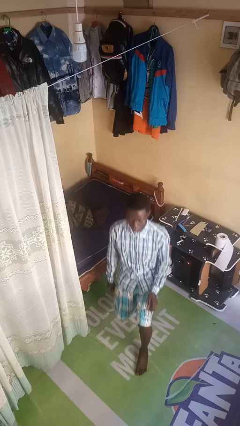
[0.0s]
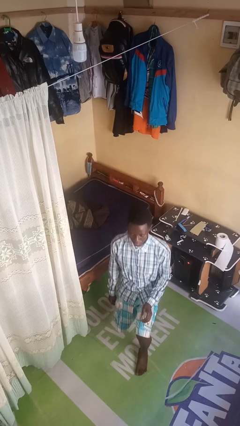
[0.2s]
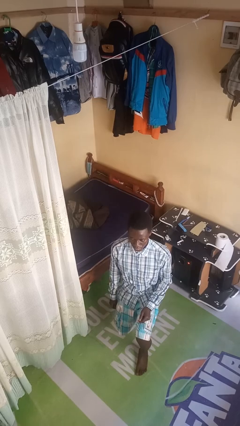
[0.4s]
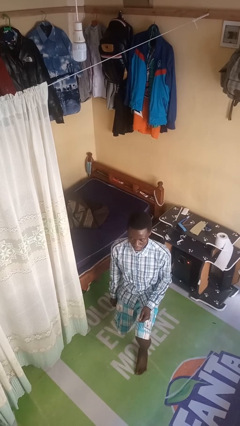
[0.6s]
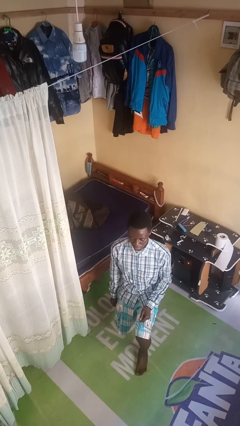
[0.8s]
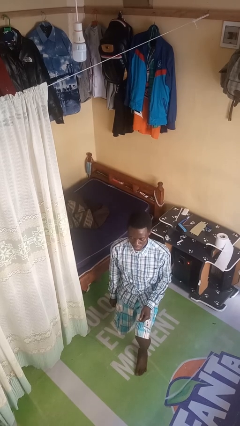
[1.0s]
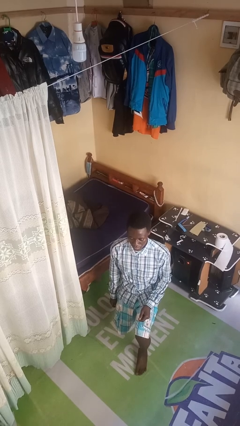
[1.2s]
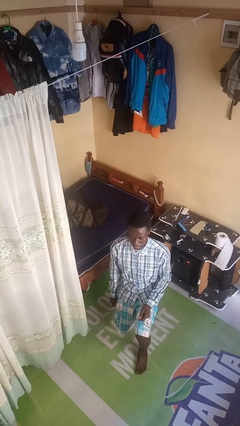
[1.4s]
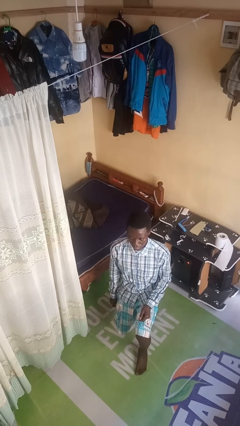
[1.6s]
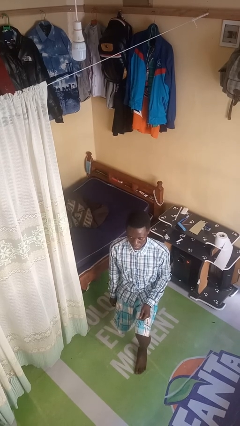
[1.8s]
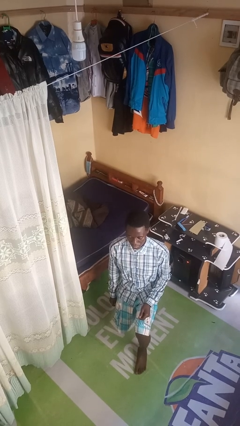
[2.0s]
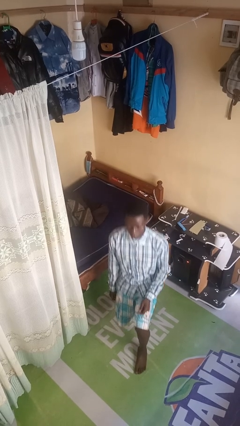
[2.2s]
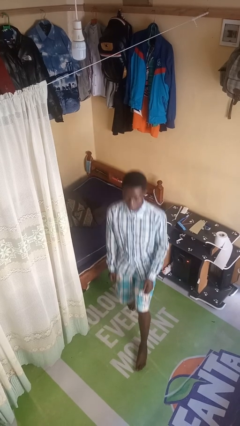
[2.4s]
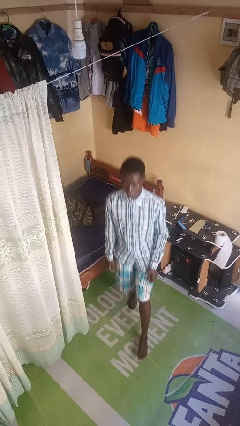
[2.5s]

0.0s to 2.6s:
person exercises with lunges

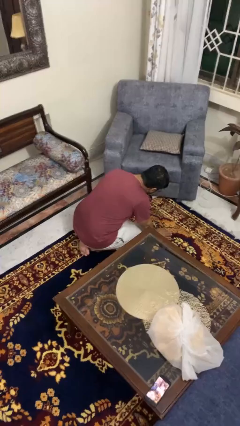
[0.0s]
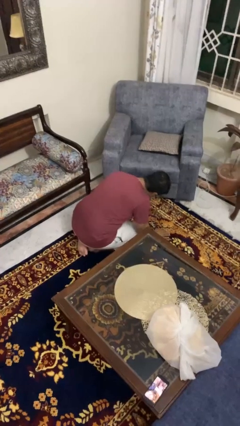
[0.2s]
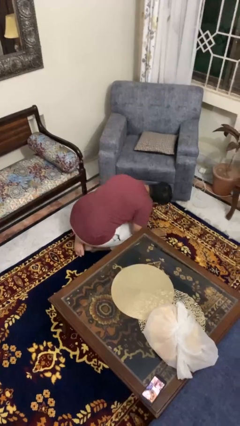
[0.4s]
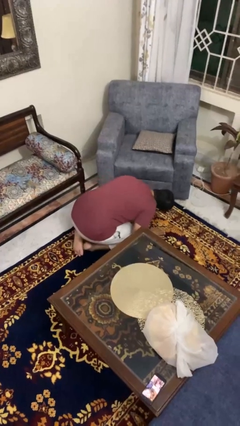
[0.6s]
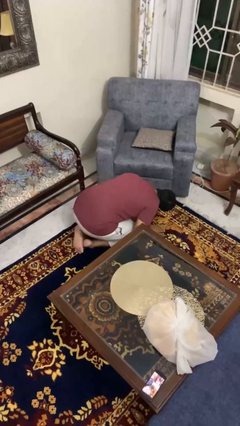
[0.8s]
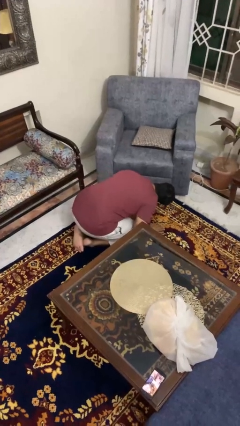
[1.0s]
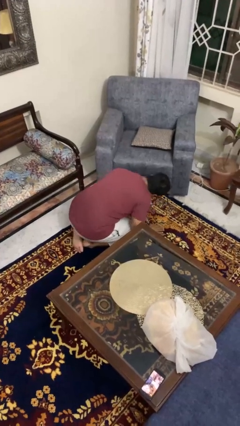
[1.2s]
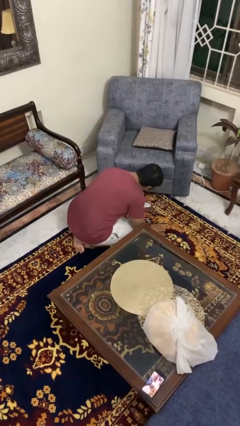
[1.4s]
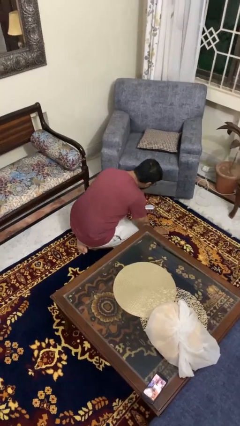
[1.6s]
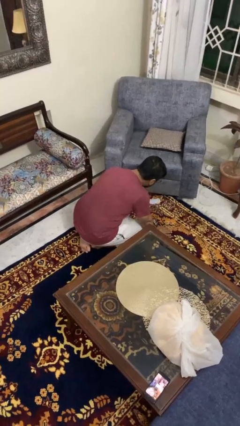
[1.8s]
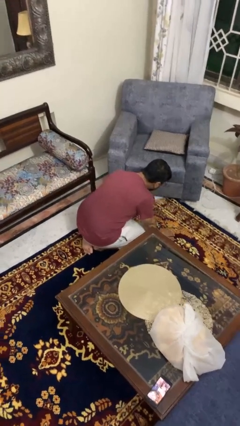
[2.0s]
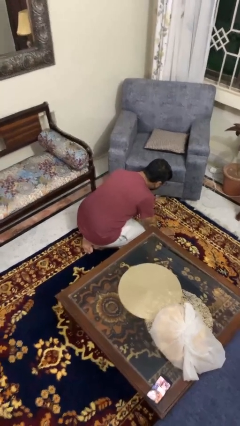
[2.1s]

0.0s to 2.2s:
person searches under couch

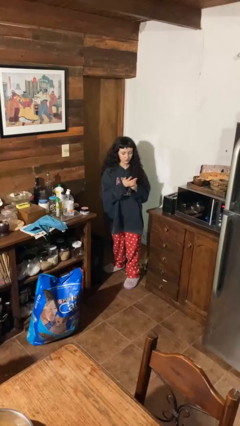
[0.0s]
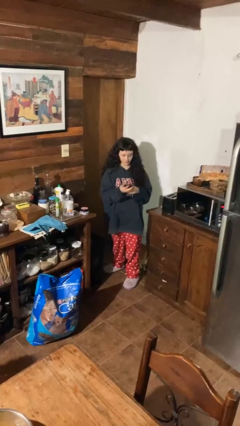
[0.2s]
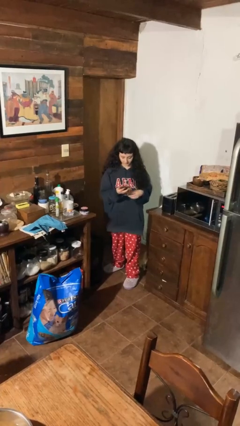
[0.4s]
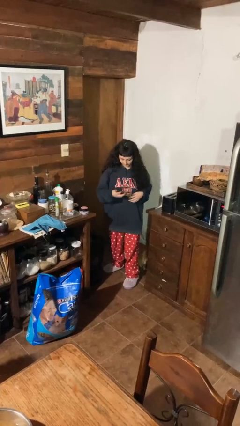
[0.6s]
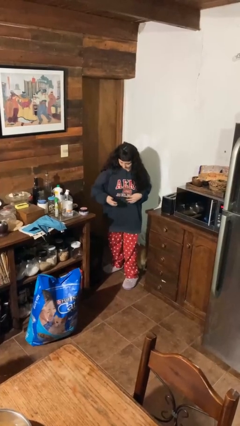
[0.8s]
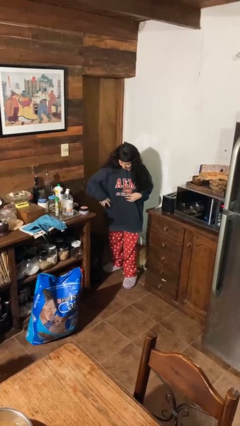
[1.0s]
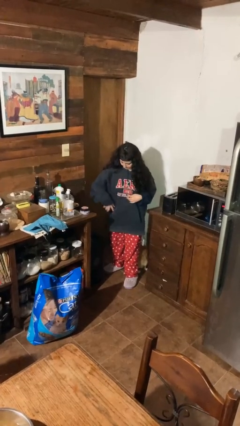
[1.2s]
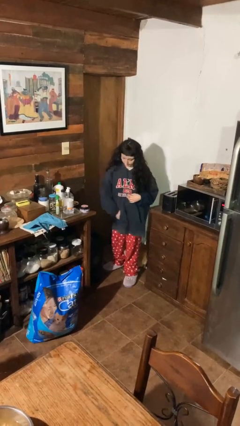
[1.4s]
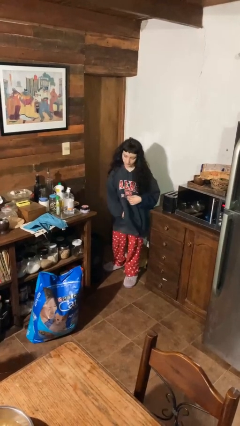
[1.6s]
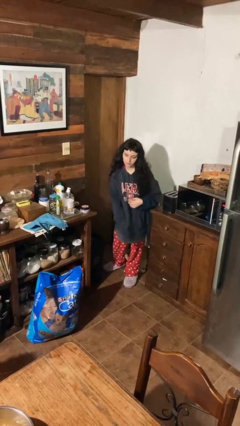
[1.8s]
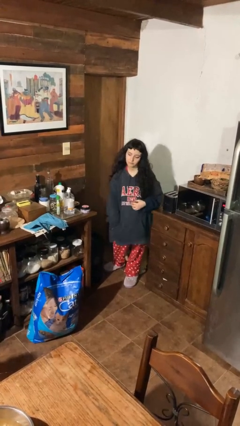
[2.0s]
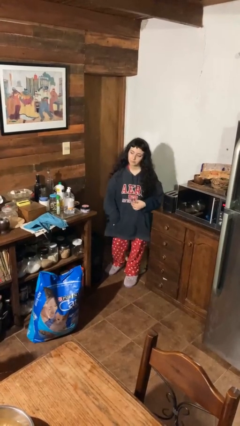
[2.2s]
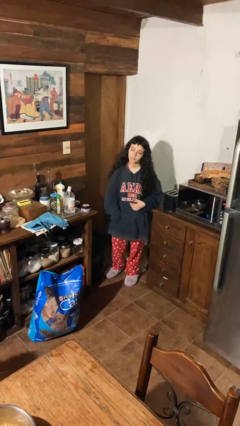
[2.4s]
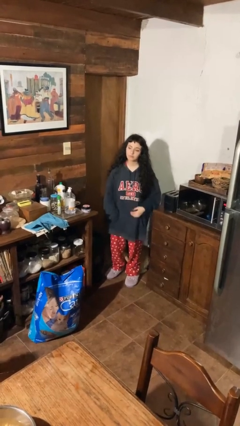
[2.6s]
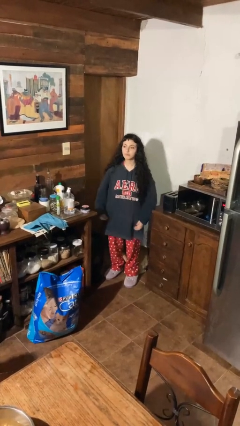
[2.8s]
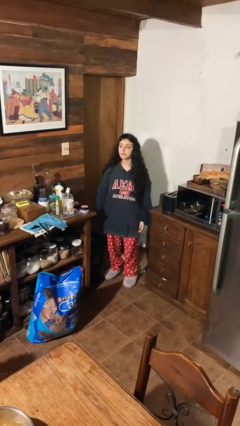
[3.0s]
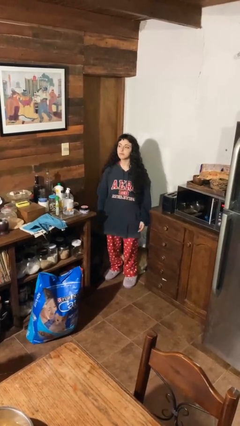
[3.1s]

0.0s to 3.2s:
person puts phone into pocket

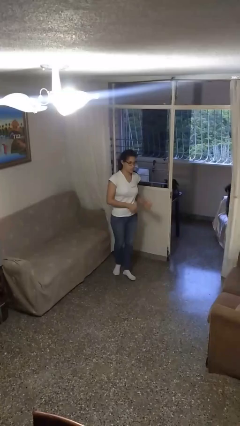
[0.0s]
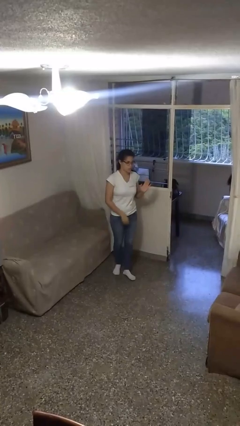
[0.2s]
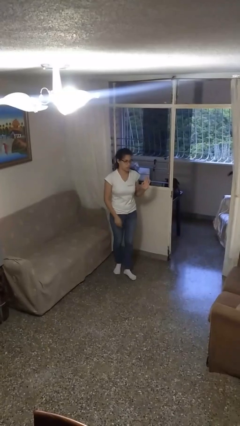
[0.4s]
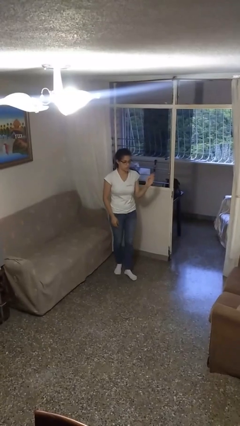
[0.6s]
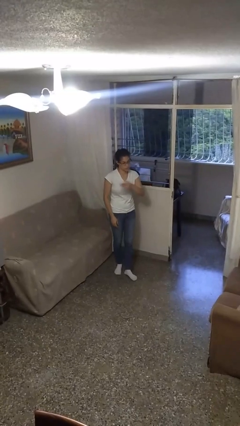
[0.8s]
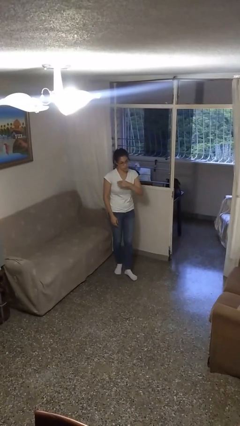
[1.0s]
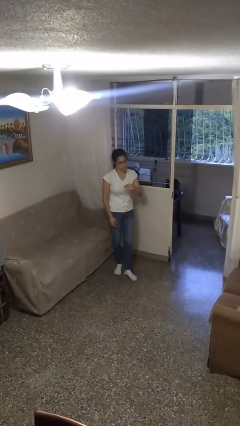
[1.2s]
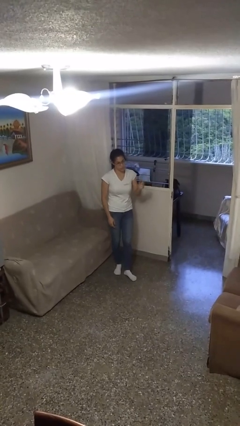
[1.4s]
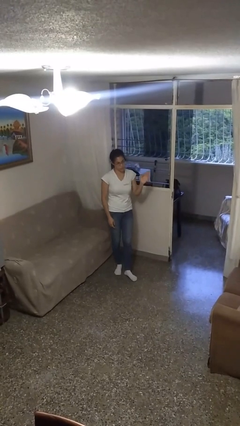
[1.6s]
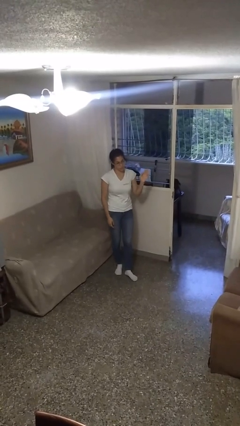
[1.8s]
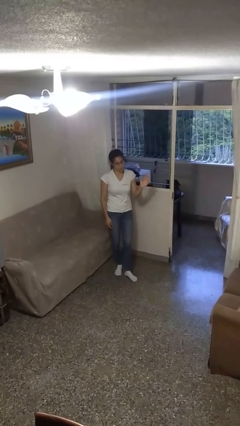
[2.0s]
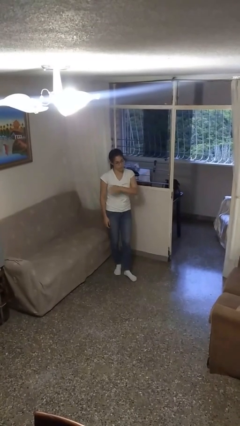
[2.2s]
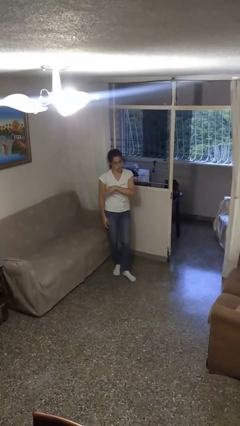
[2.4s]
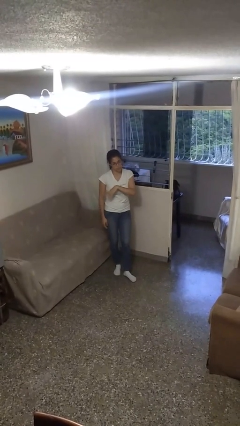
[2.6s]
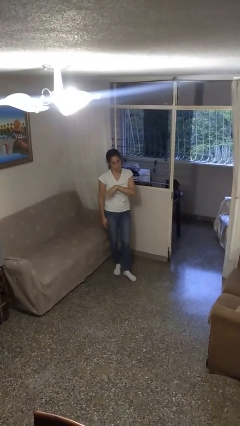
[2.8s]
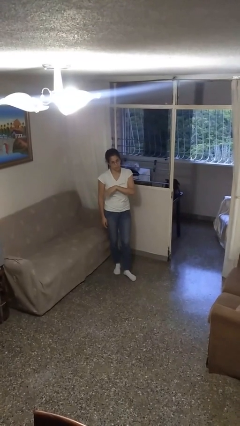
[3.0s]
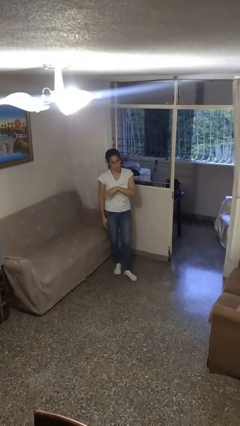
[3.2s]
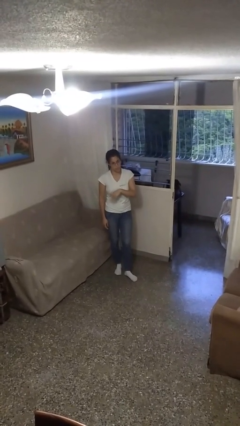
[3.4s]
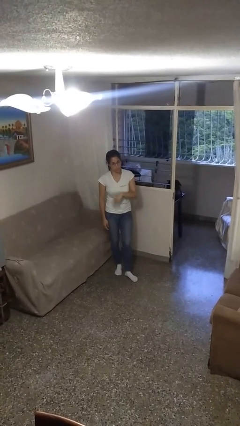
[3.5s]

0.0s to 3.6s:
person gestures swipe right

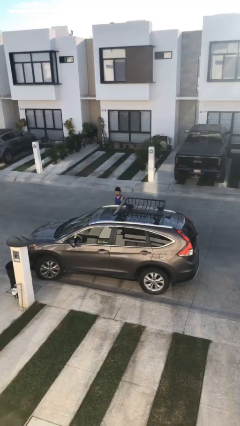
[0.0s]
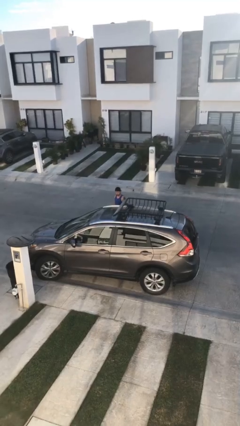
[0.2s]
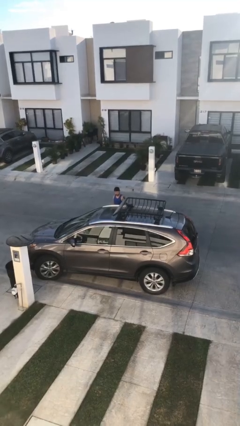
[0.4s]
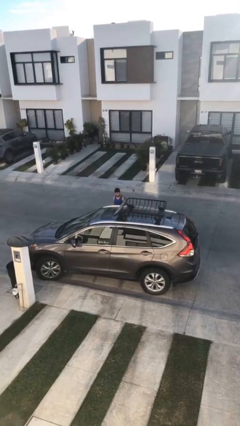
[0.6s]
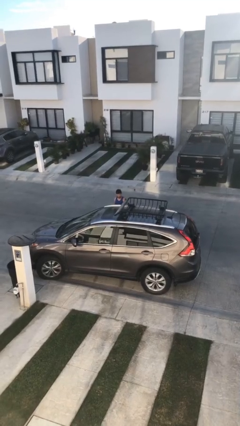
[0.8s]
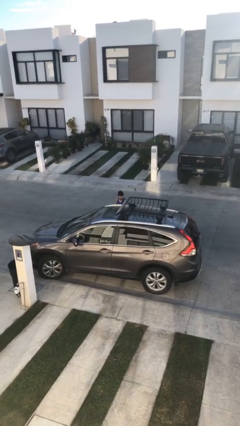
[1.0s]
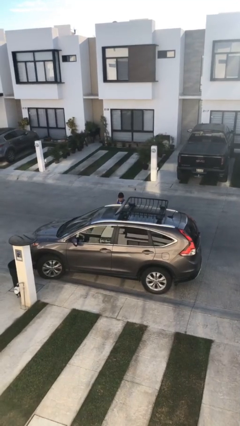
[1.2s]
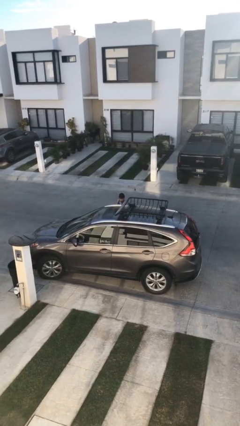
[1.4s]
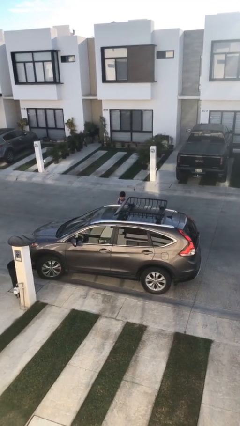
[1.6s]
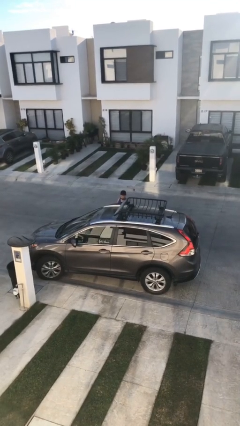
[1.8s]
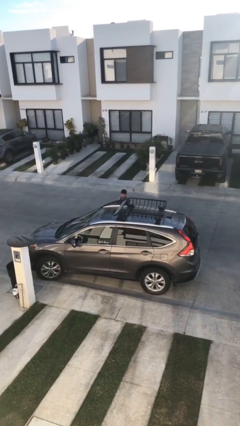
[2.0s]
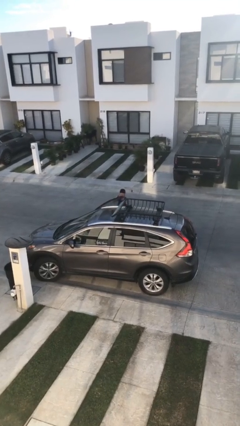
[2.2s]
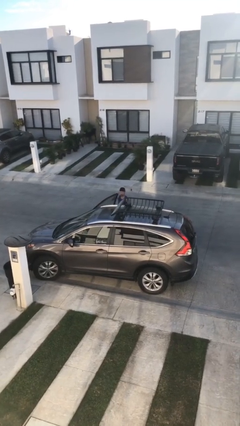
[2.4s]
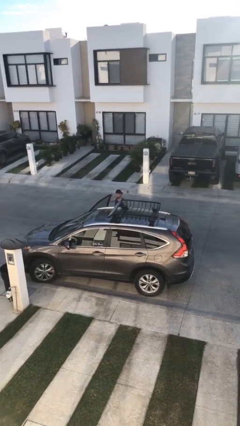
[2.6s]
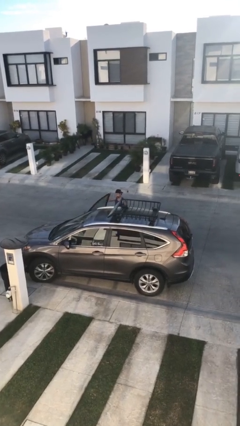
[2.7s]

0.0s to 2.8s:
person opens car door

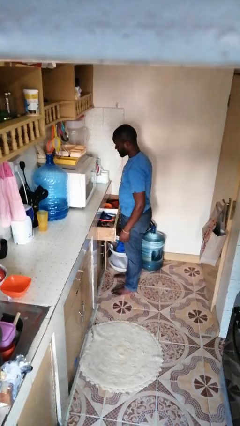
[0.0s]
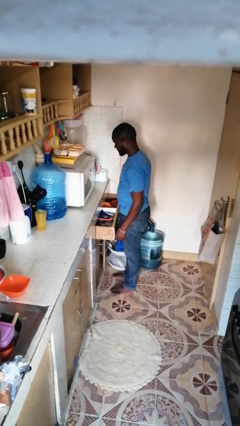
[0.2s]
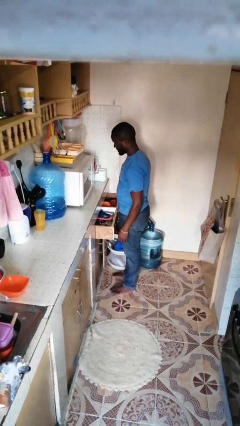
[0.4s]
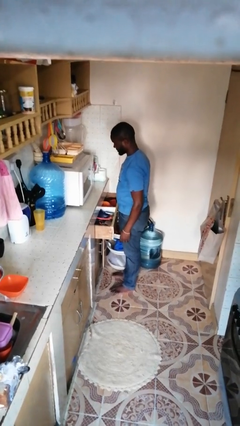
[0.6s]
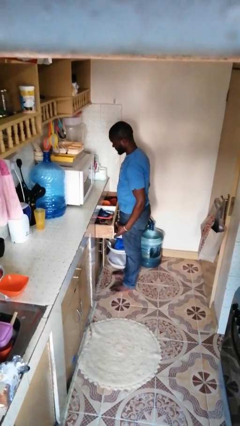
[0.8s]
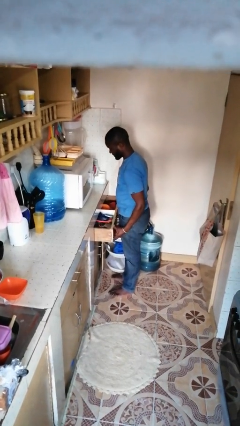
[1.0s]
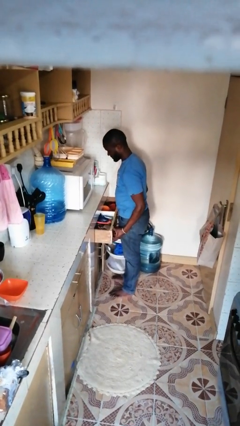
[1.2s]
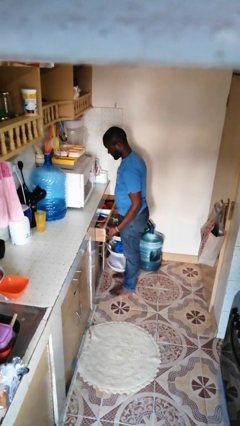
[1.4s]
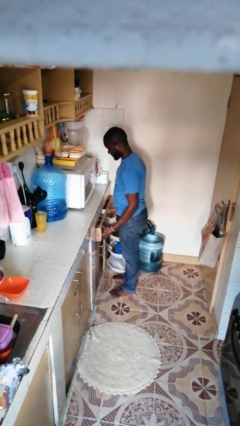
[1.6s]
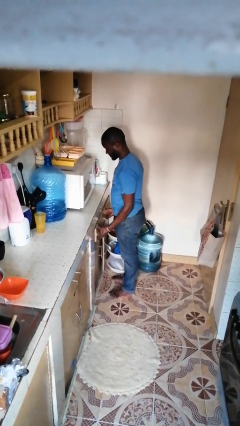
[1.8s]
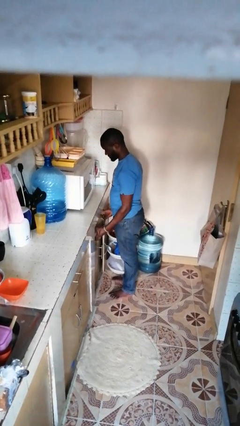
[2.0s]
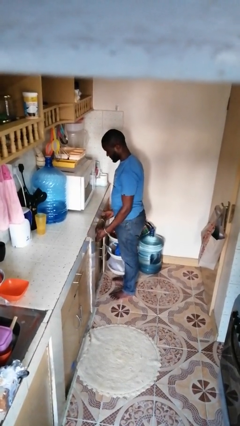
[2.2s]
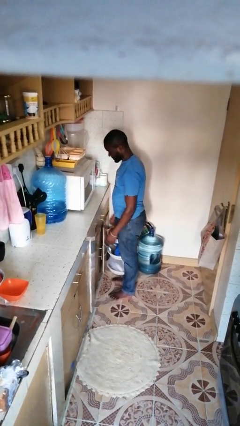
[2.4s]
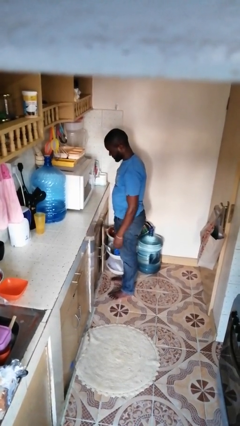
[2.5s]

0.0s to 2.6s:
person closes kitchen drawer
